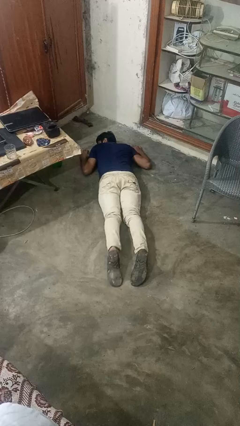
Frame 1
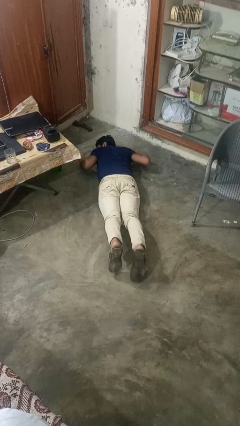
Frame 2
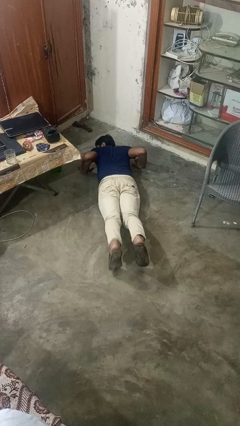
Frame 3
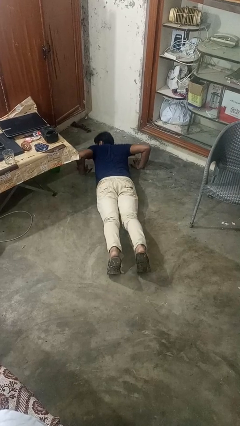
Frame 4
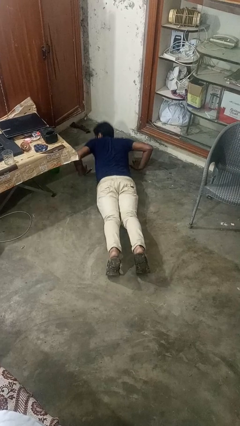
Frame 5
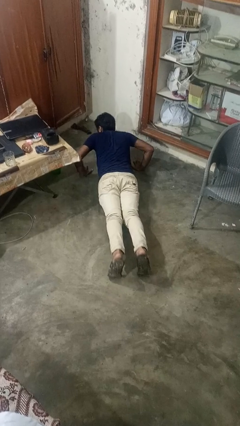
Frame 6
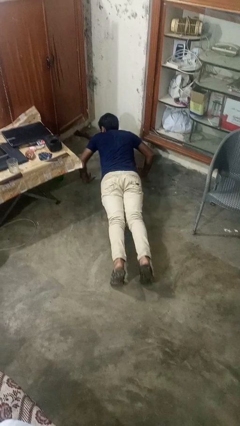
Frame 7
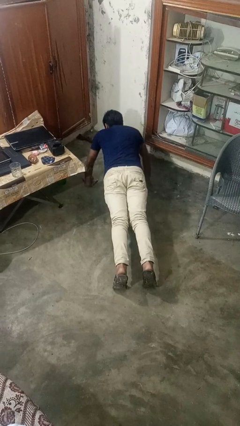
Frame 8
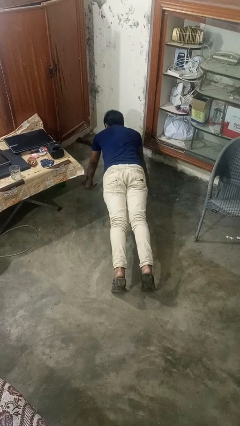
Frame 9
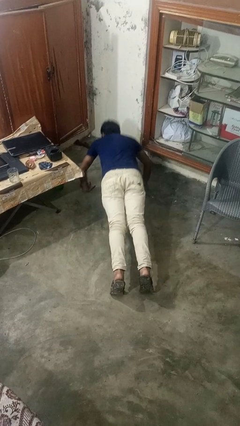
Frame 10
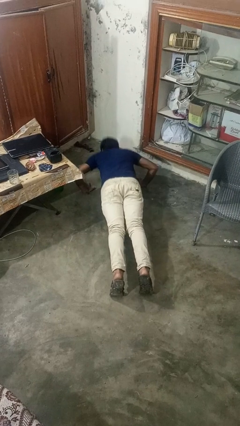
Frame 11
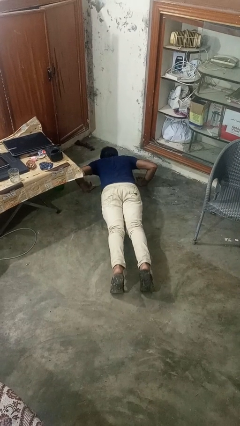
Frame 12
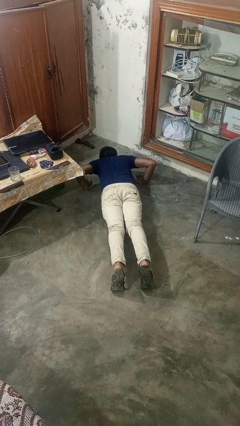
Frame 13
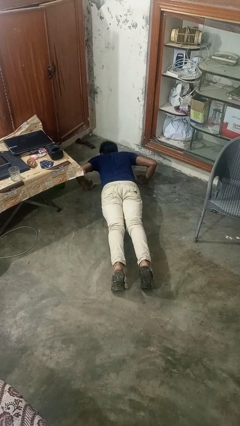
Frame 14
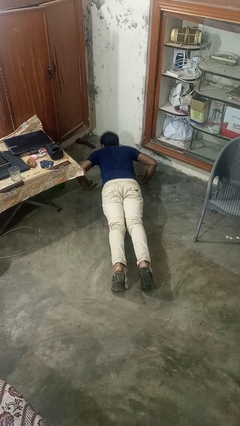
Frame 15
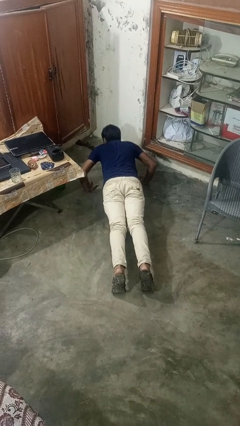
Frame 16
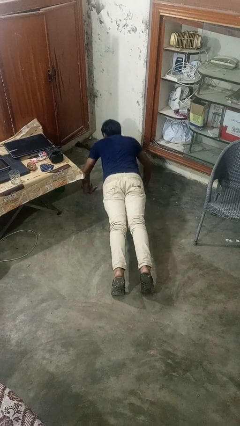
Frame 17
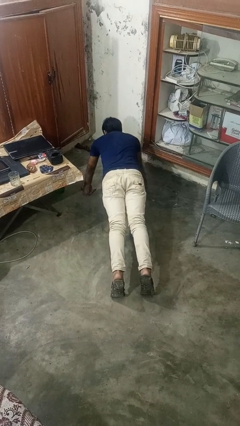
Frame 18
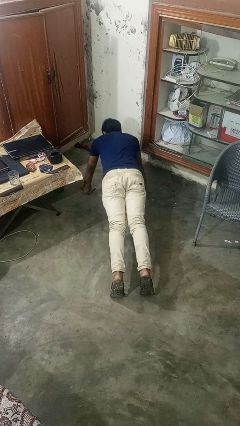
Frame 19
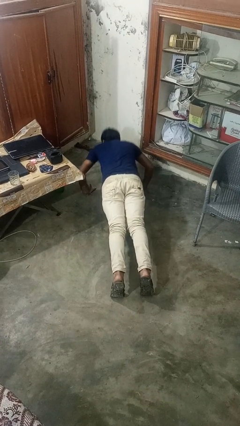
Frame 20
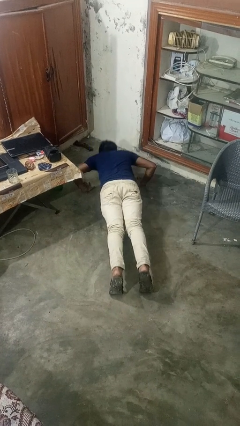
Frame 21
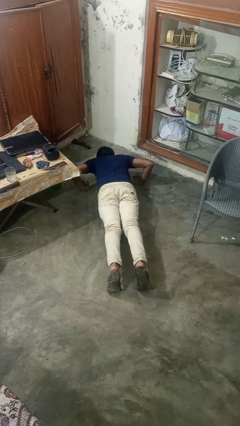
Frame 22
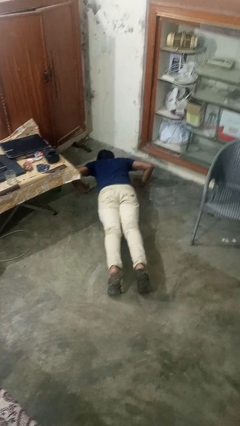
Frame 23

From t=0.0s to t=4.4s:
person exercises with pushup

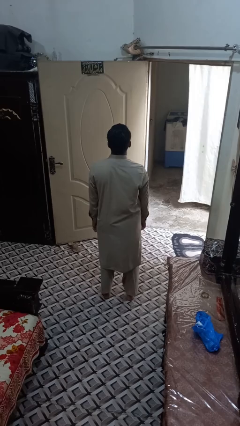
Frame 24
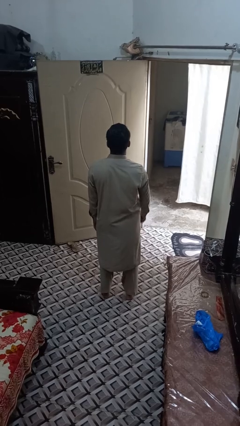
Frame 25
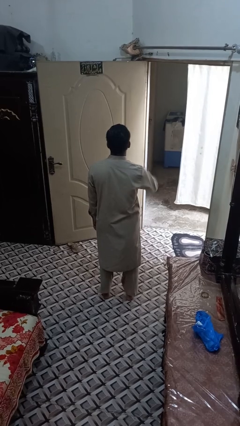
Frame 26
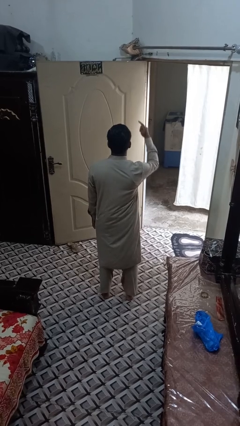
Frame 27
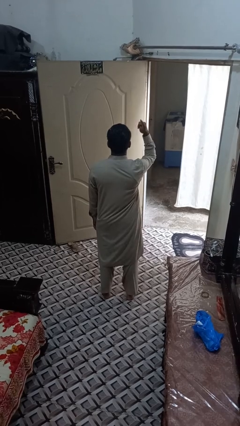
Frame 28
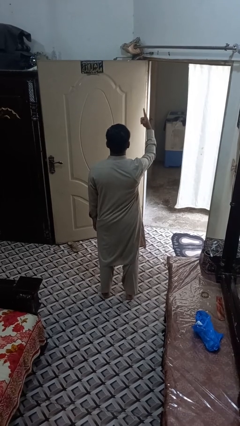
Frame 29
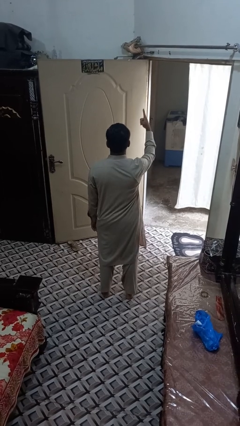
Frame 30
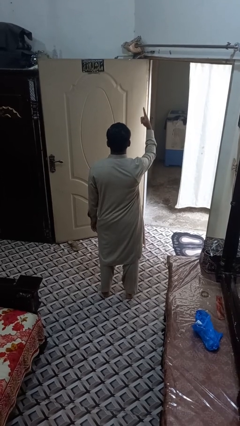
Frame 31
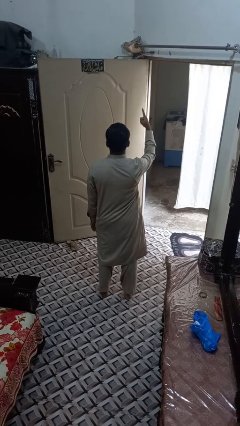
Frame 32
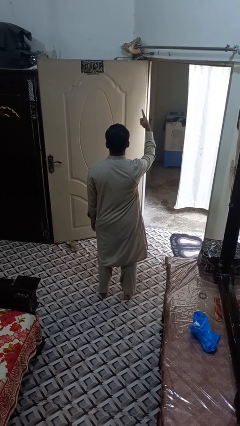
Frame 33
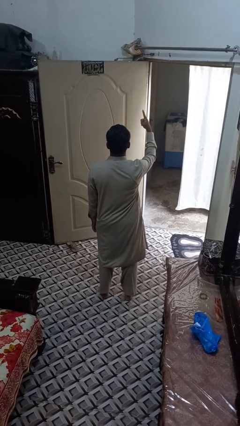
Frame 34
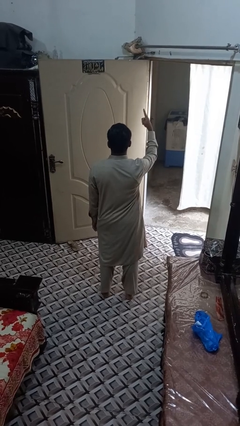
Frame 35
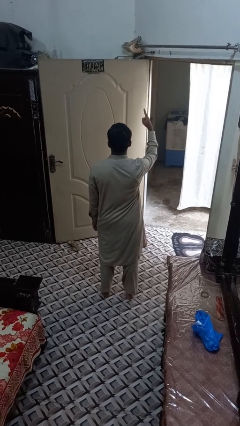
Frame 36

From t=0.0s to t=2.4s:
person gestures number one

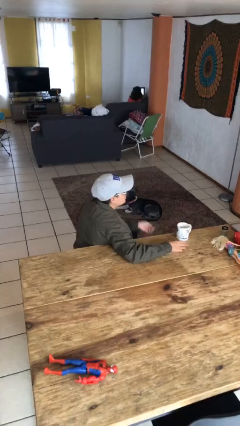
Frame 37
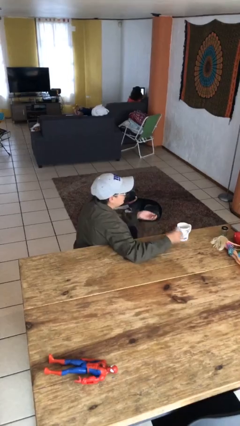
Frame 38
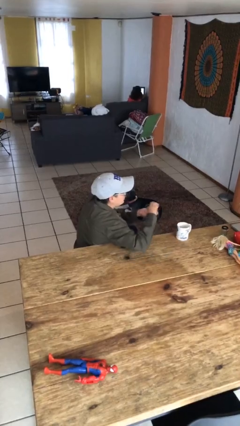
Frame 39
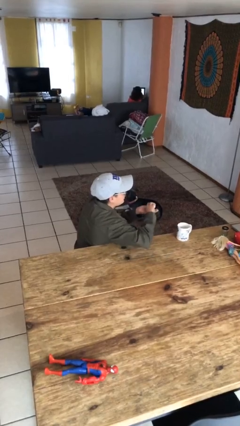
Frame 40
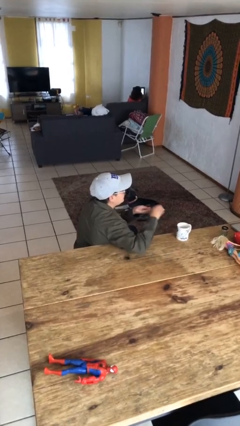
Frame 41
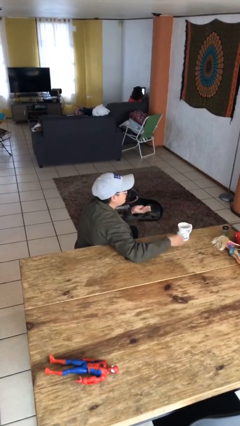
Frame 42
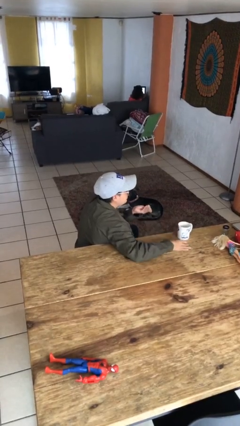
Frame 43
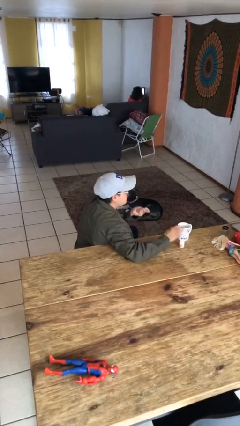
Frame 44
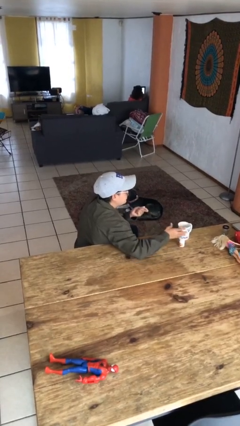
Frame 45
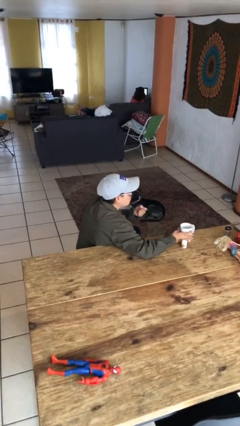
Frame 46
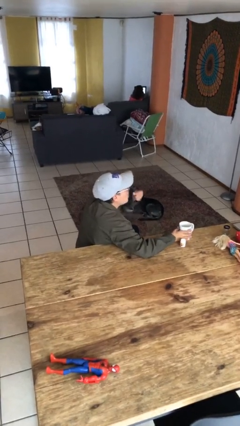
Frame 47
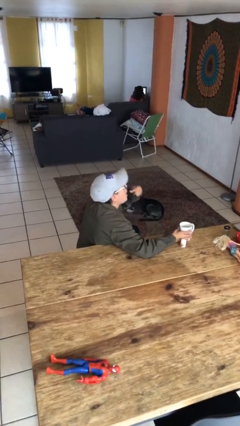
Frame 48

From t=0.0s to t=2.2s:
person takes medicine pills

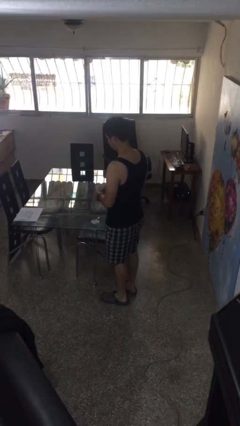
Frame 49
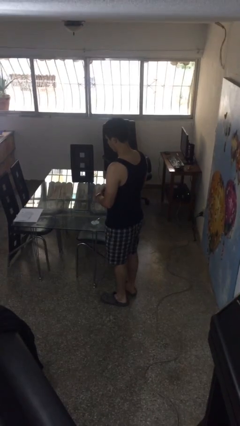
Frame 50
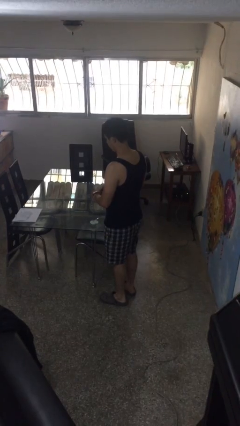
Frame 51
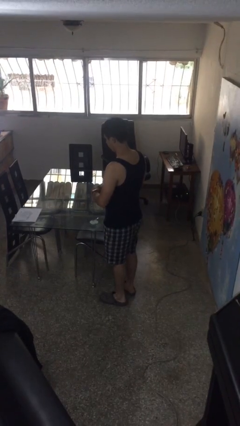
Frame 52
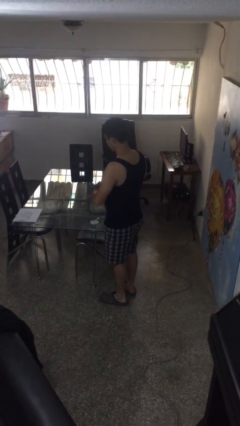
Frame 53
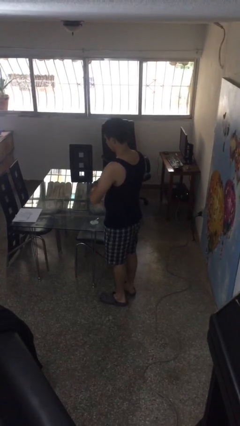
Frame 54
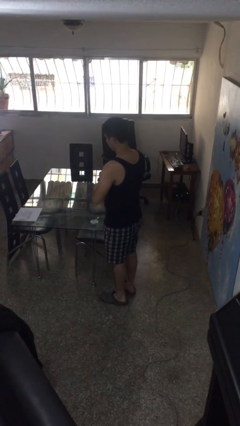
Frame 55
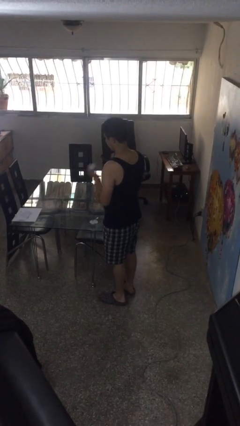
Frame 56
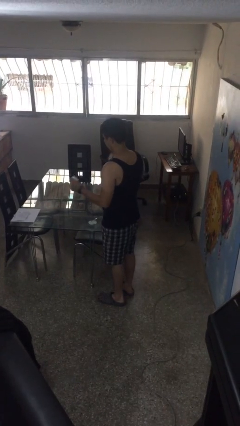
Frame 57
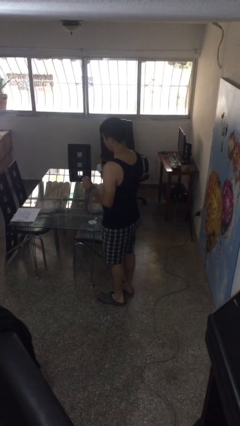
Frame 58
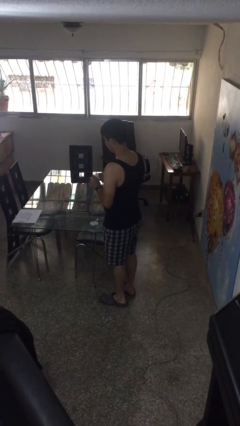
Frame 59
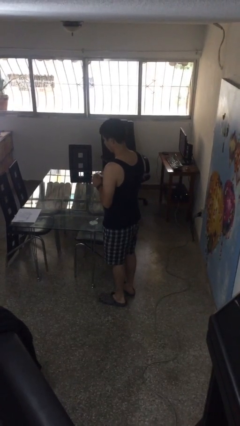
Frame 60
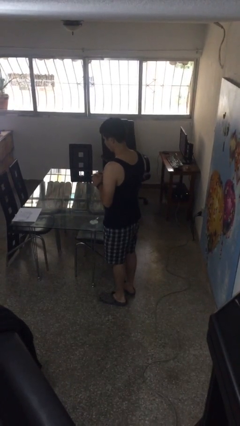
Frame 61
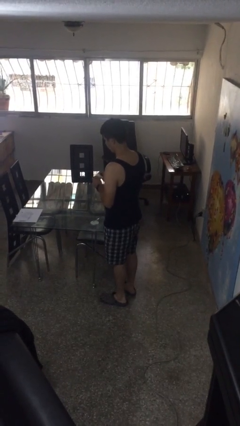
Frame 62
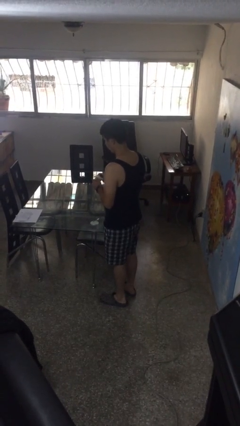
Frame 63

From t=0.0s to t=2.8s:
person tears paper

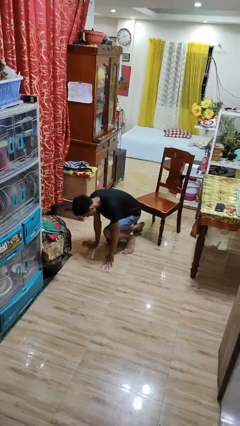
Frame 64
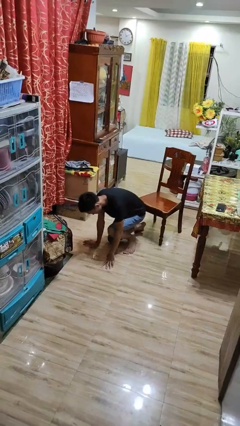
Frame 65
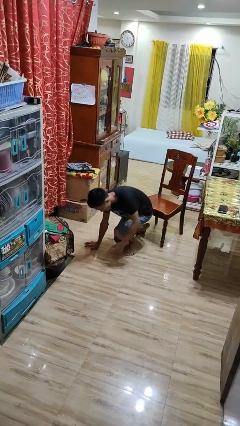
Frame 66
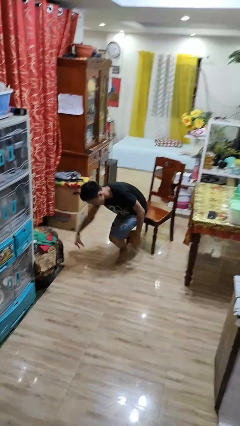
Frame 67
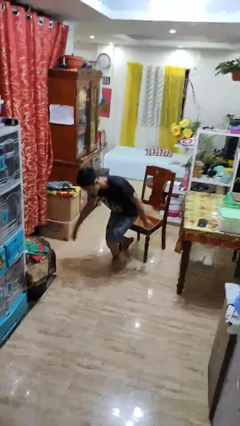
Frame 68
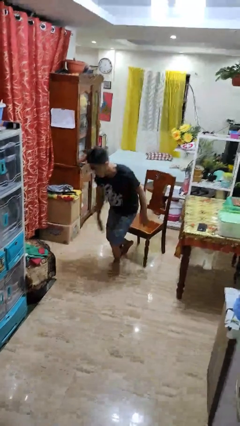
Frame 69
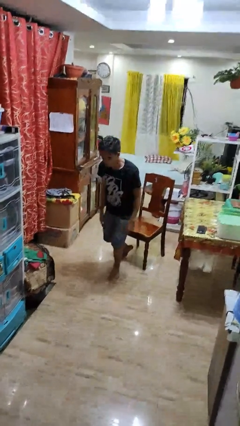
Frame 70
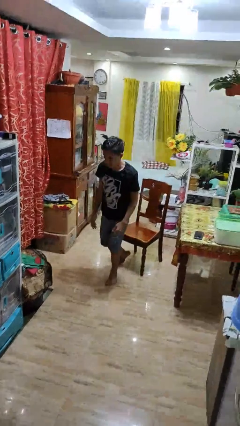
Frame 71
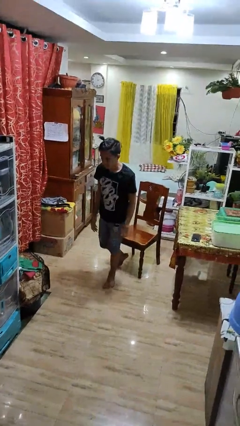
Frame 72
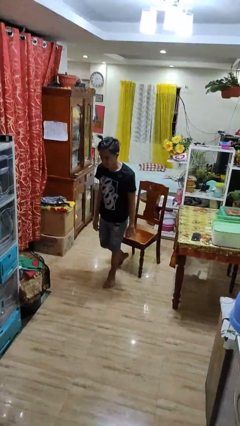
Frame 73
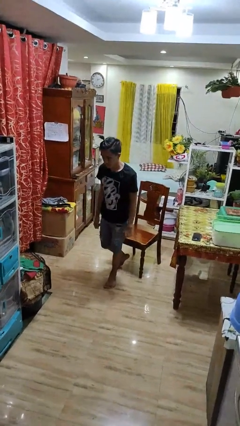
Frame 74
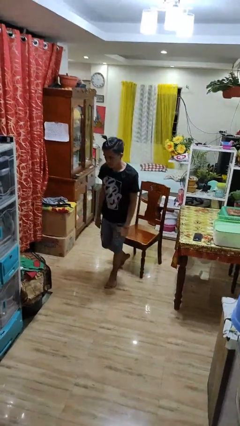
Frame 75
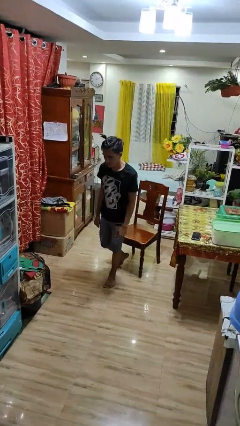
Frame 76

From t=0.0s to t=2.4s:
person stands up from floor

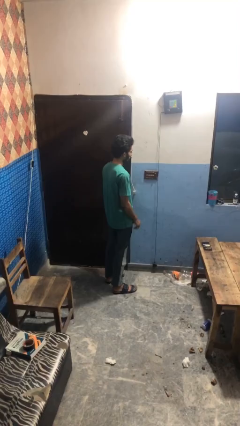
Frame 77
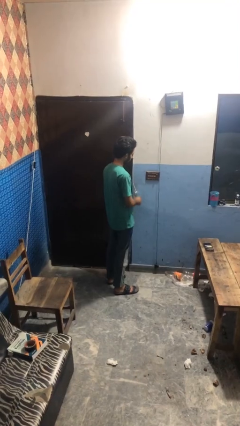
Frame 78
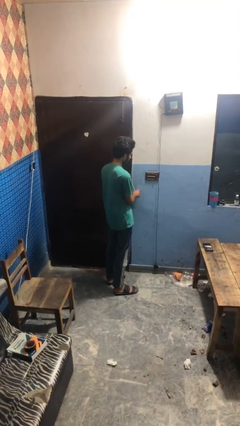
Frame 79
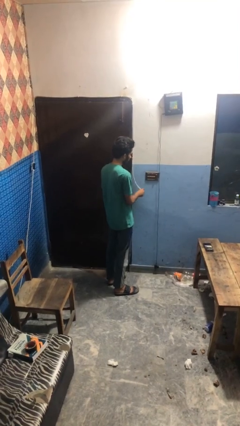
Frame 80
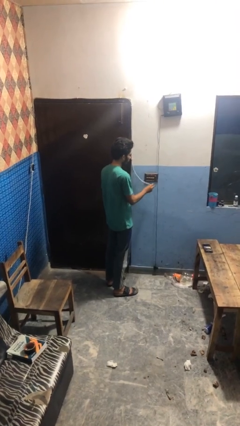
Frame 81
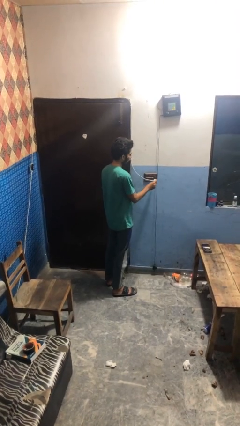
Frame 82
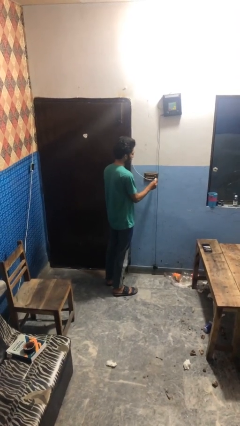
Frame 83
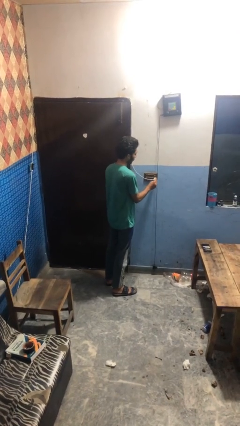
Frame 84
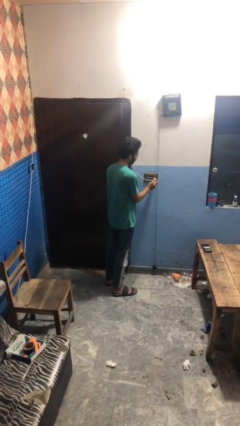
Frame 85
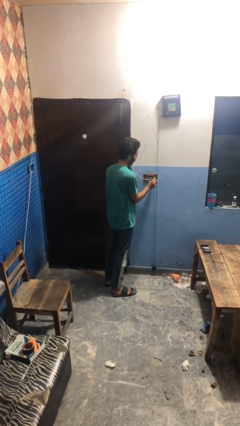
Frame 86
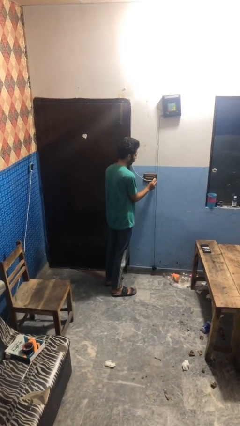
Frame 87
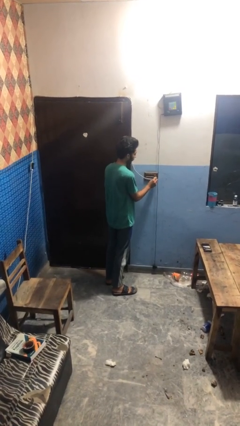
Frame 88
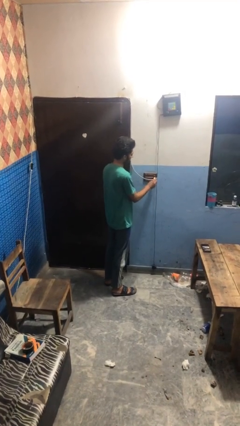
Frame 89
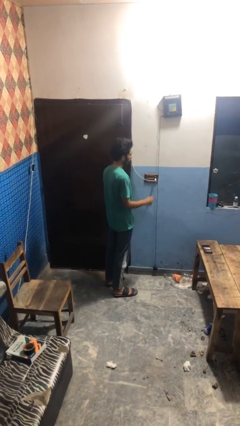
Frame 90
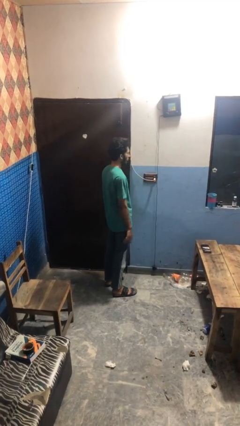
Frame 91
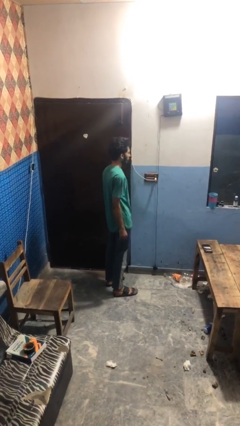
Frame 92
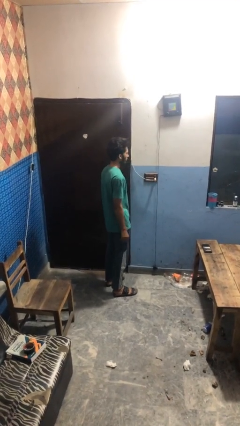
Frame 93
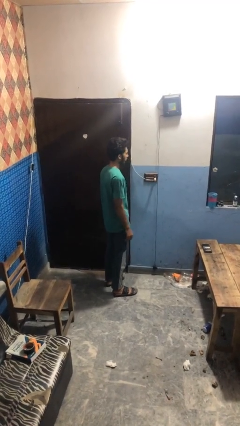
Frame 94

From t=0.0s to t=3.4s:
person plugs into electrical socket
